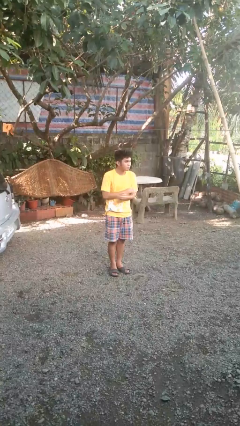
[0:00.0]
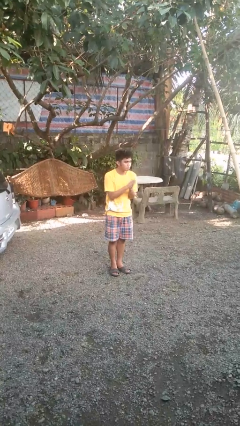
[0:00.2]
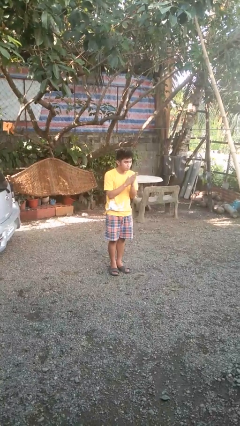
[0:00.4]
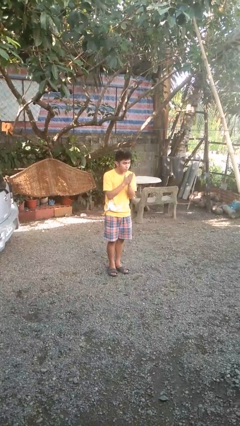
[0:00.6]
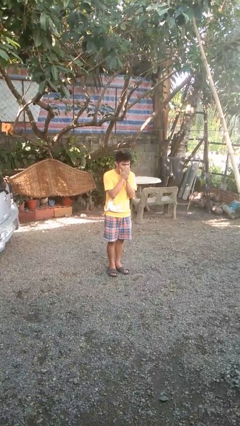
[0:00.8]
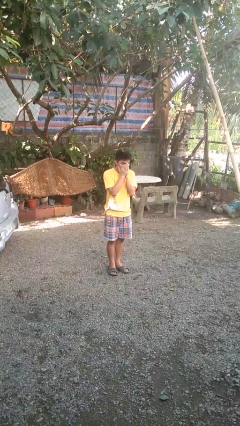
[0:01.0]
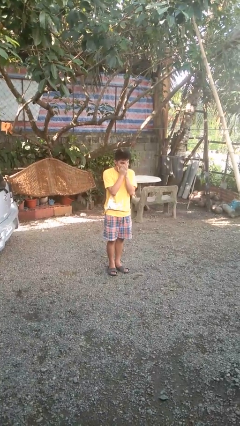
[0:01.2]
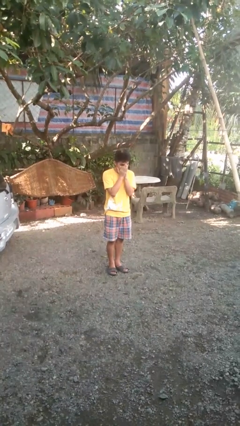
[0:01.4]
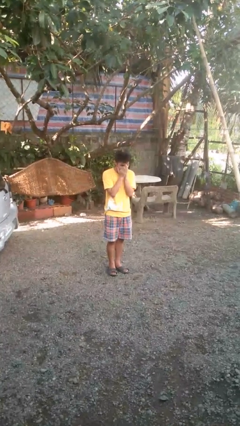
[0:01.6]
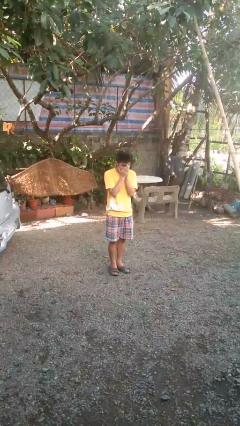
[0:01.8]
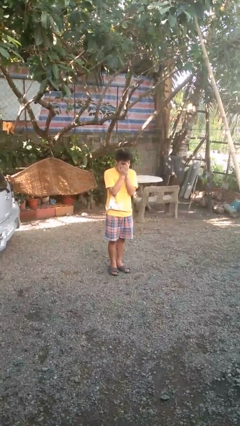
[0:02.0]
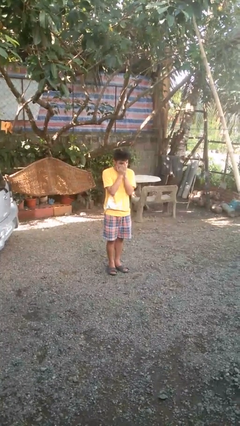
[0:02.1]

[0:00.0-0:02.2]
person blows into hands

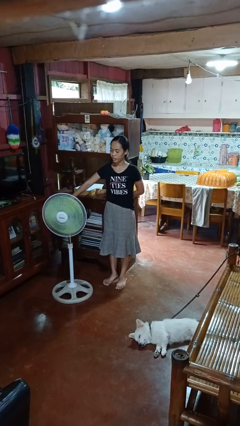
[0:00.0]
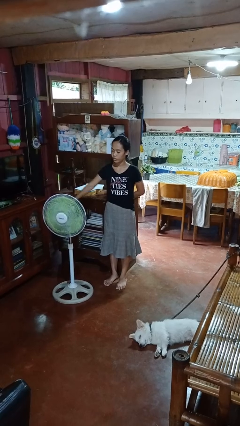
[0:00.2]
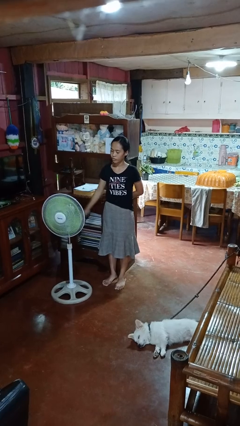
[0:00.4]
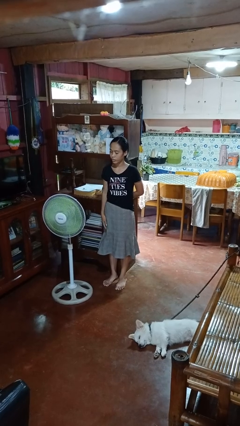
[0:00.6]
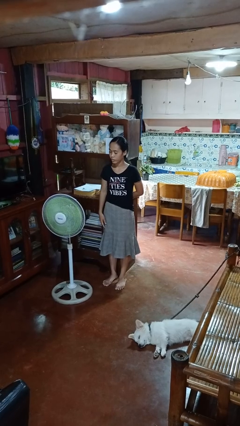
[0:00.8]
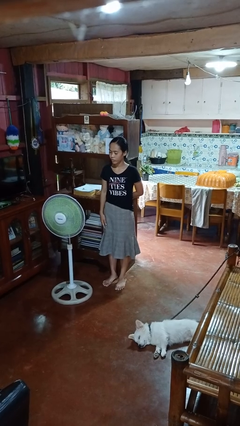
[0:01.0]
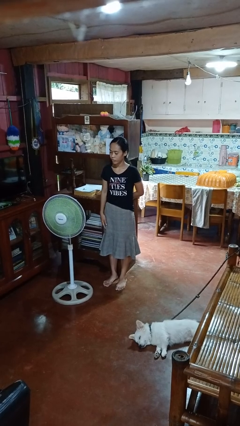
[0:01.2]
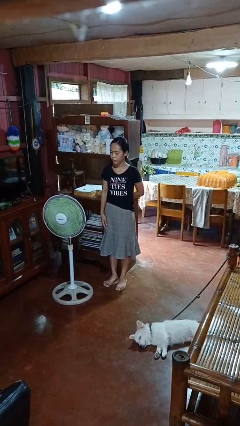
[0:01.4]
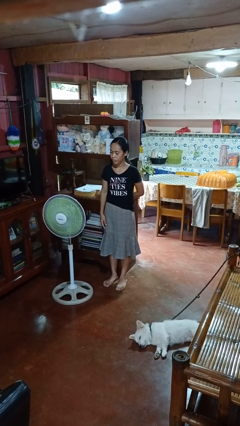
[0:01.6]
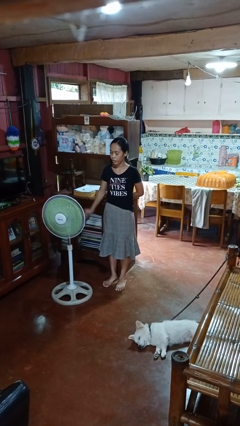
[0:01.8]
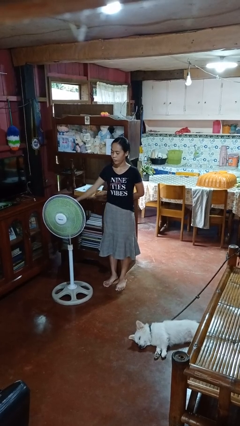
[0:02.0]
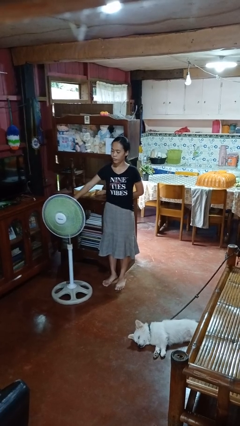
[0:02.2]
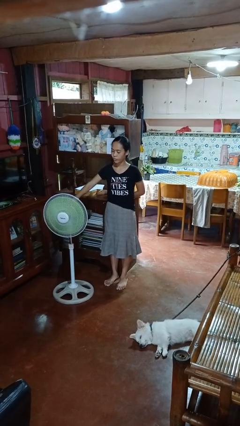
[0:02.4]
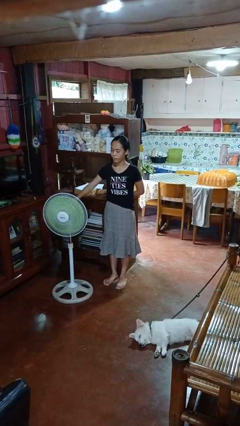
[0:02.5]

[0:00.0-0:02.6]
person turns on fan

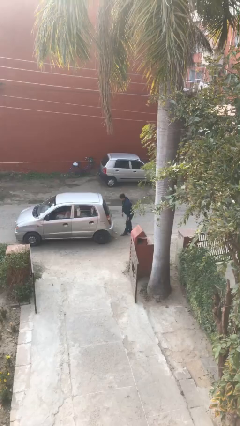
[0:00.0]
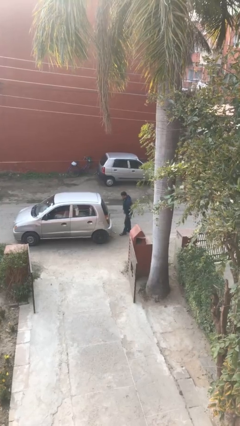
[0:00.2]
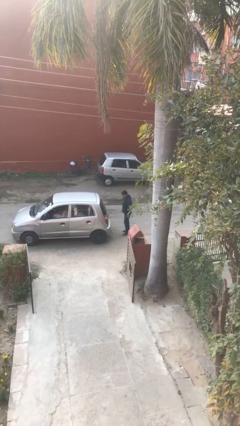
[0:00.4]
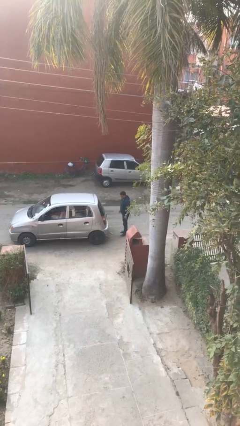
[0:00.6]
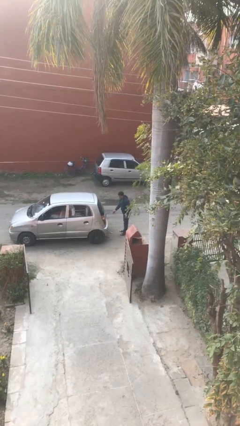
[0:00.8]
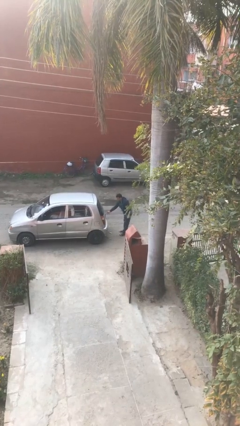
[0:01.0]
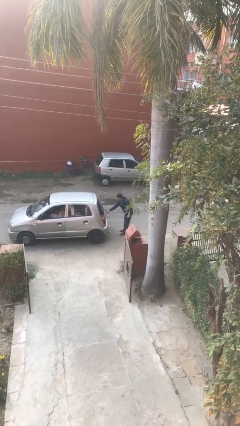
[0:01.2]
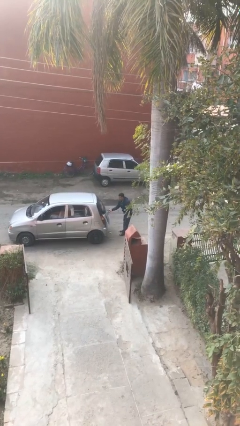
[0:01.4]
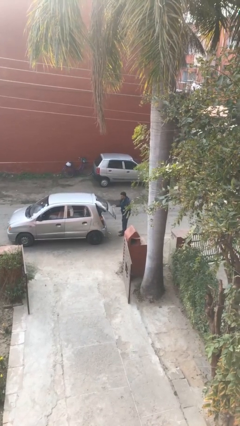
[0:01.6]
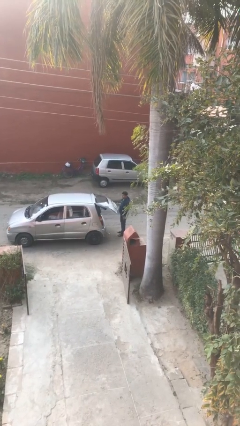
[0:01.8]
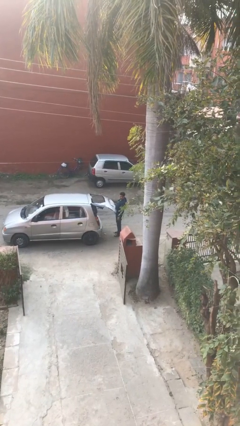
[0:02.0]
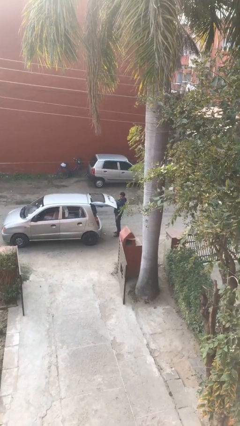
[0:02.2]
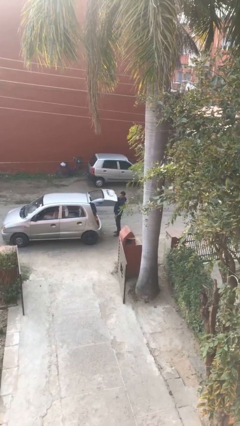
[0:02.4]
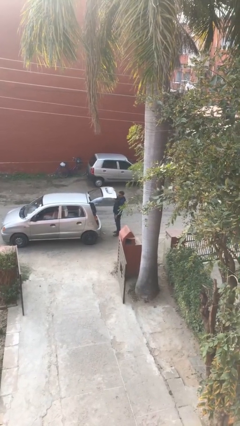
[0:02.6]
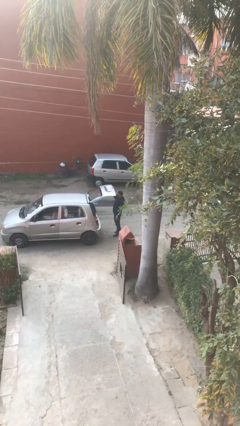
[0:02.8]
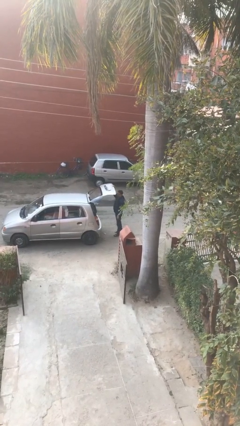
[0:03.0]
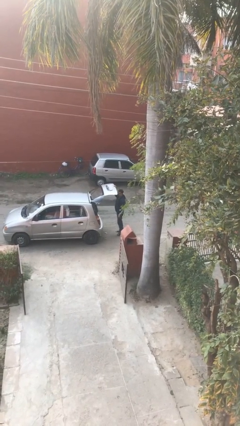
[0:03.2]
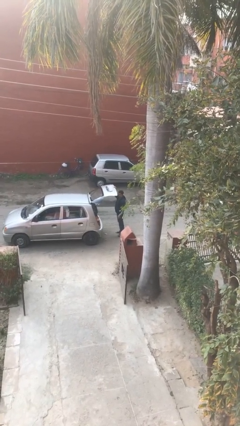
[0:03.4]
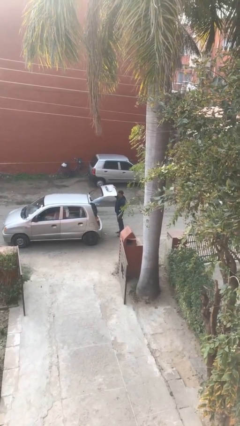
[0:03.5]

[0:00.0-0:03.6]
person opens car trunk

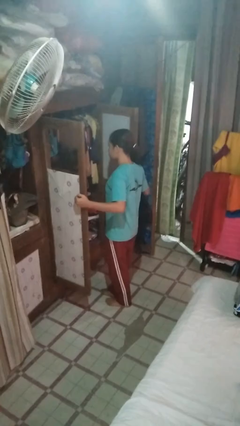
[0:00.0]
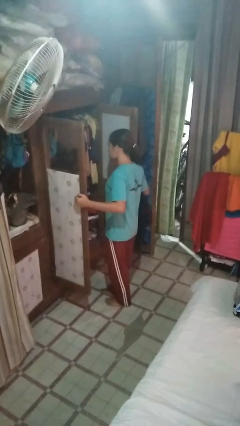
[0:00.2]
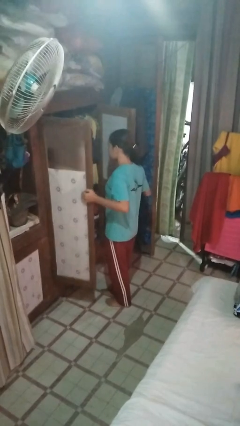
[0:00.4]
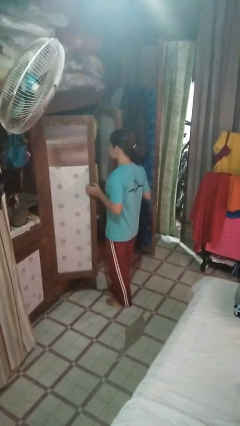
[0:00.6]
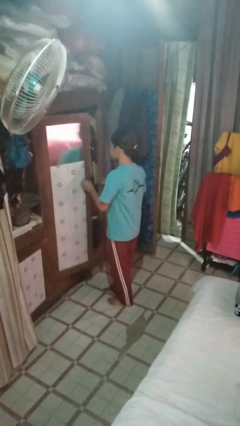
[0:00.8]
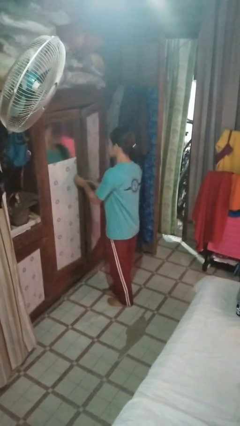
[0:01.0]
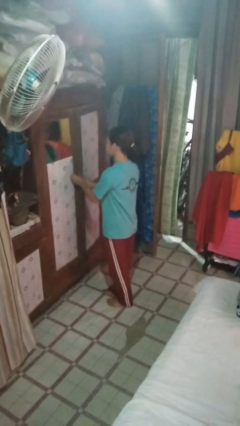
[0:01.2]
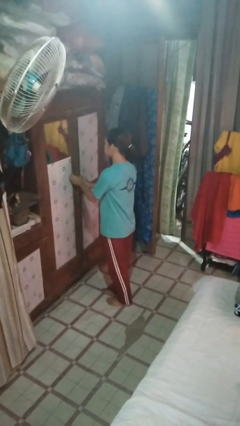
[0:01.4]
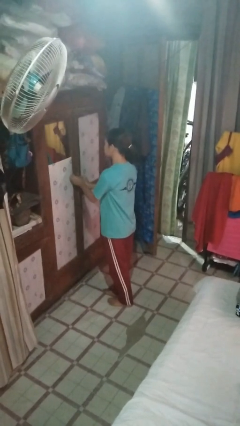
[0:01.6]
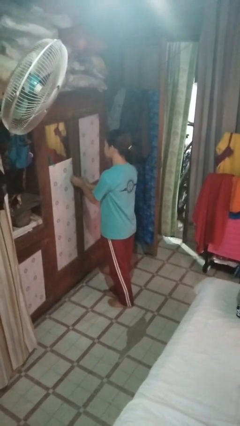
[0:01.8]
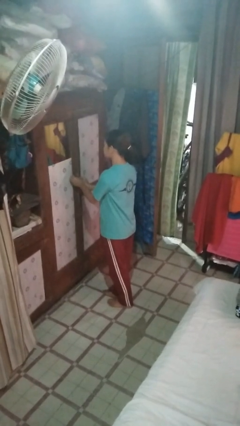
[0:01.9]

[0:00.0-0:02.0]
person closes closet door

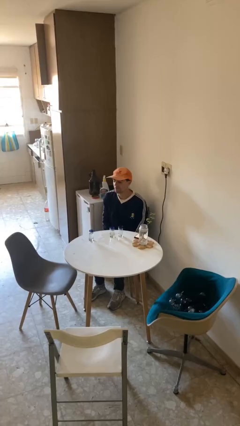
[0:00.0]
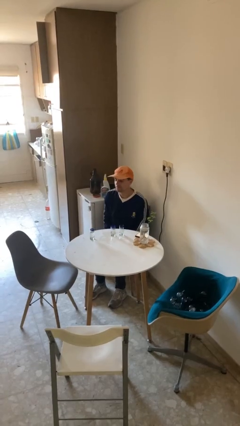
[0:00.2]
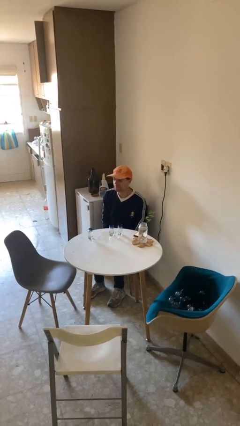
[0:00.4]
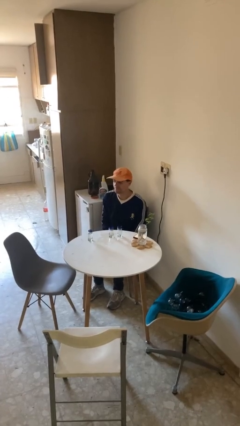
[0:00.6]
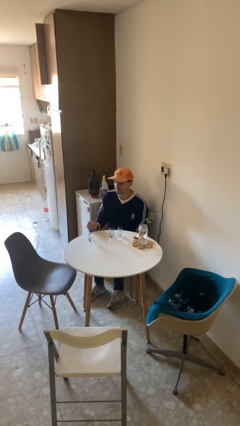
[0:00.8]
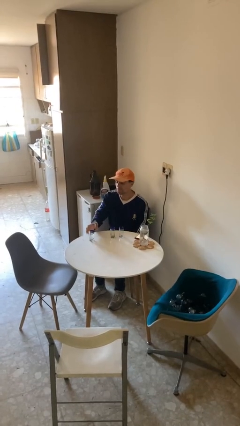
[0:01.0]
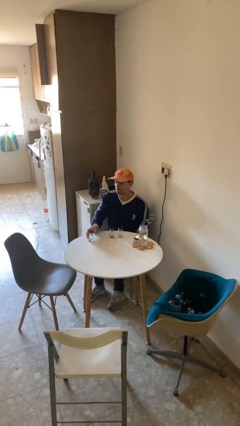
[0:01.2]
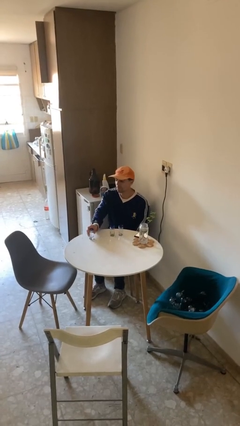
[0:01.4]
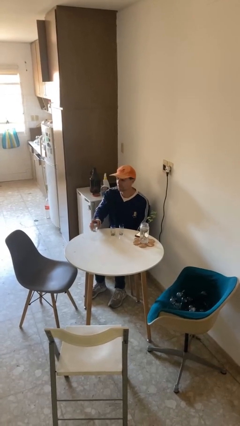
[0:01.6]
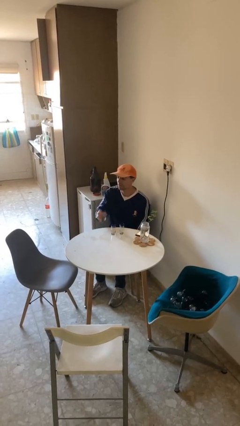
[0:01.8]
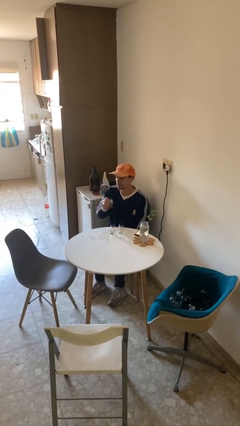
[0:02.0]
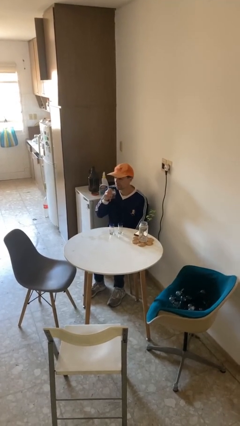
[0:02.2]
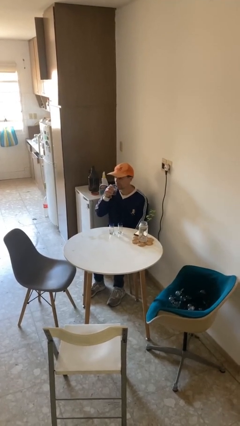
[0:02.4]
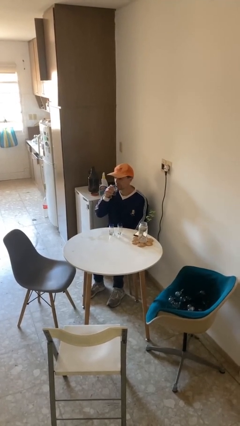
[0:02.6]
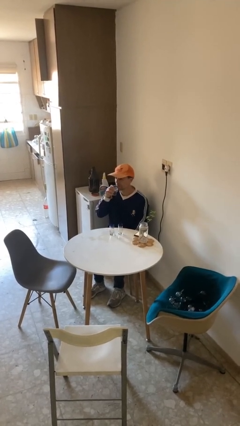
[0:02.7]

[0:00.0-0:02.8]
person picks up object from table

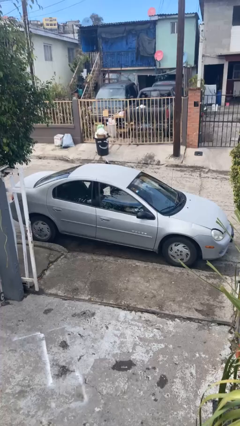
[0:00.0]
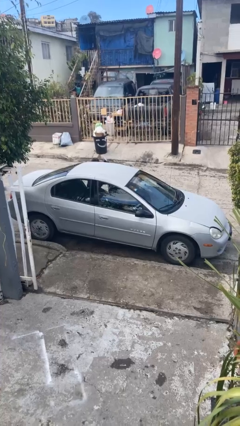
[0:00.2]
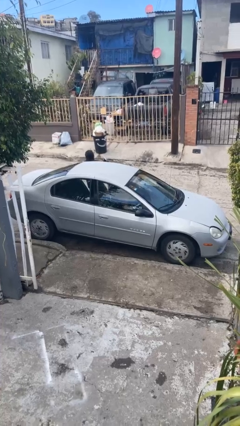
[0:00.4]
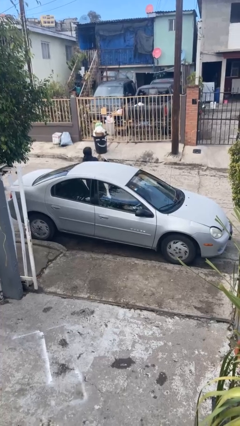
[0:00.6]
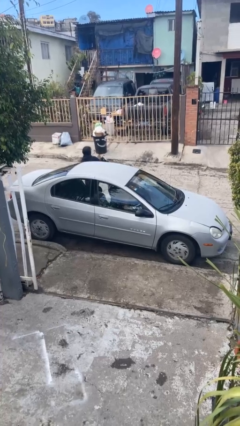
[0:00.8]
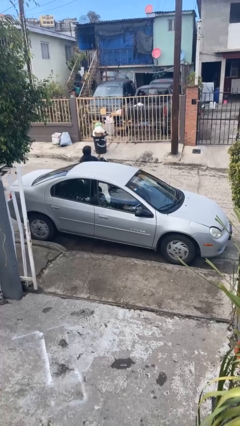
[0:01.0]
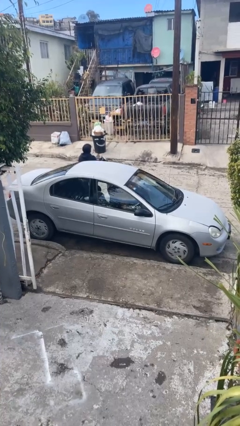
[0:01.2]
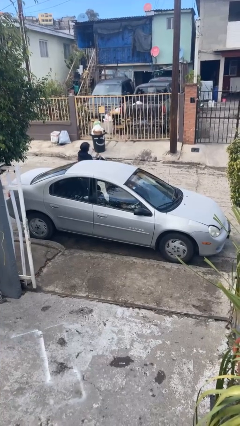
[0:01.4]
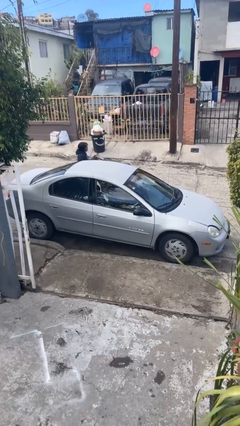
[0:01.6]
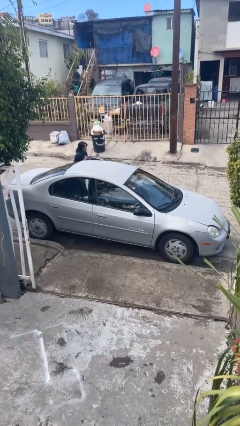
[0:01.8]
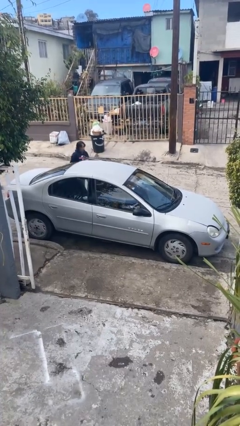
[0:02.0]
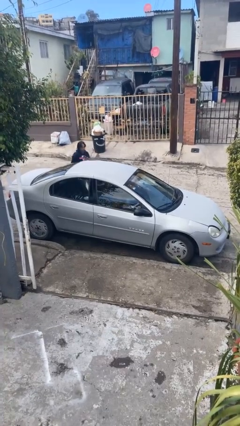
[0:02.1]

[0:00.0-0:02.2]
car drops off person

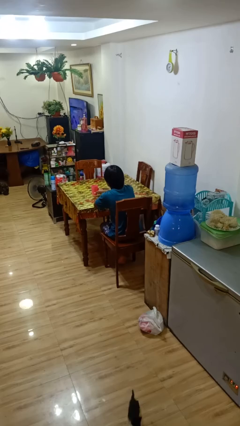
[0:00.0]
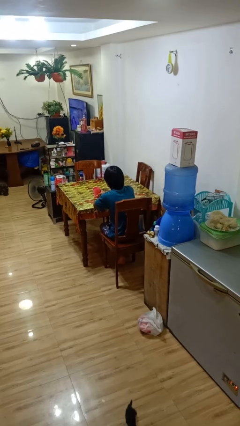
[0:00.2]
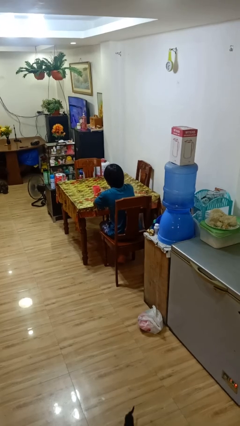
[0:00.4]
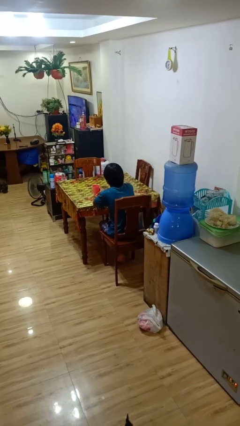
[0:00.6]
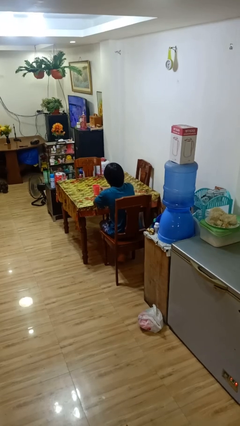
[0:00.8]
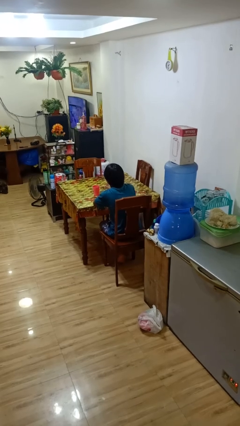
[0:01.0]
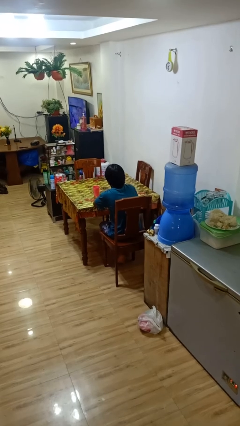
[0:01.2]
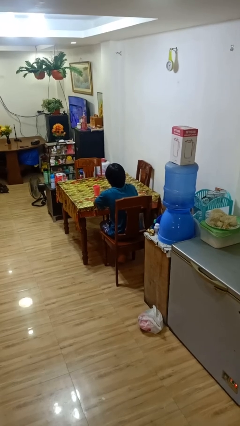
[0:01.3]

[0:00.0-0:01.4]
person sets upright glass

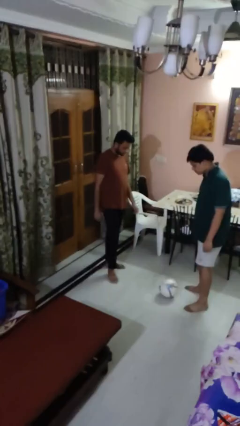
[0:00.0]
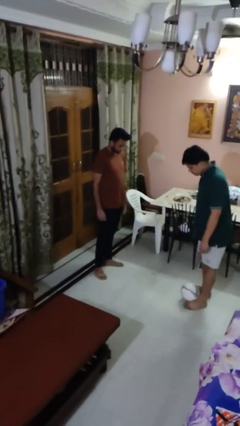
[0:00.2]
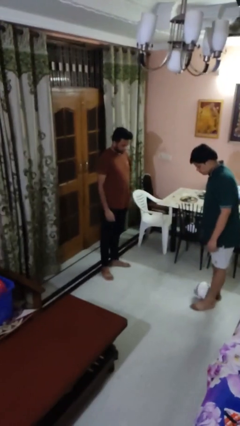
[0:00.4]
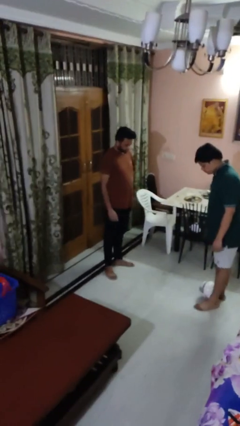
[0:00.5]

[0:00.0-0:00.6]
person kicks object to person
